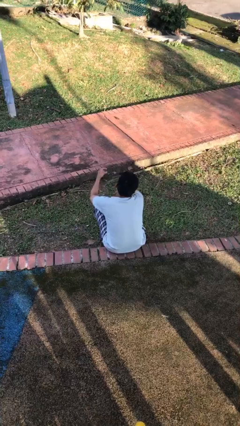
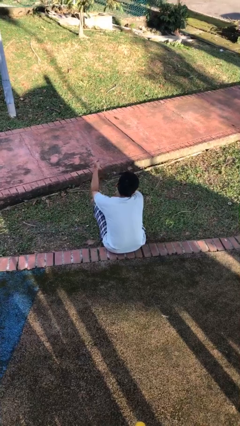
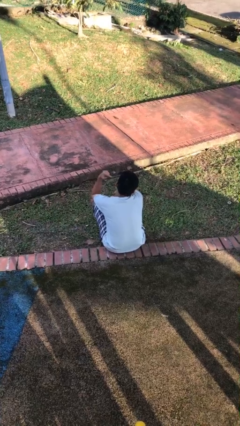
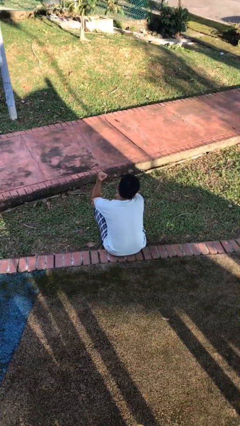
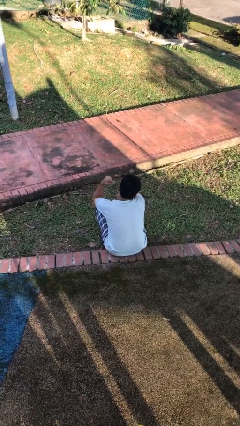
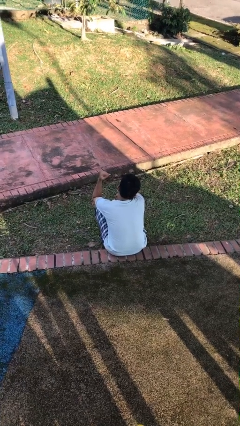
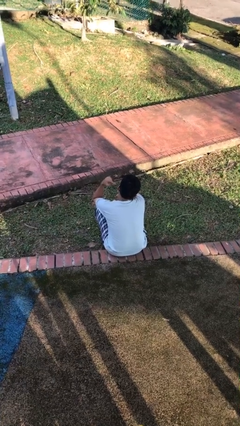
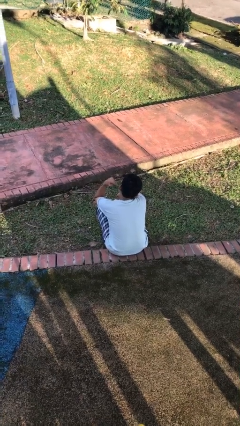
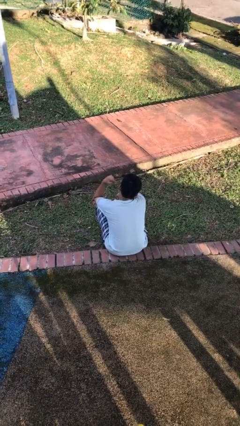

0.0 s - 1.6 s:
person gestures listen closely

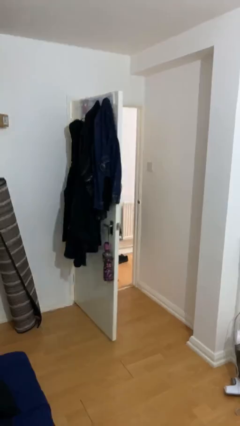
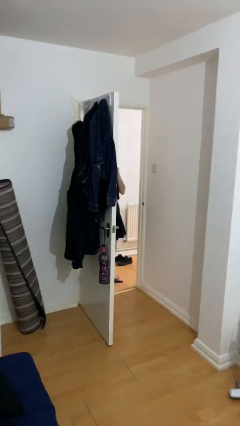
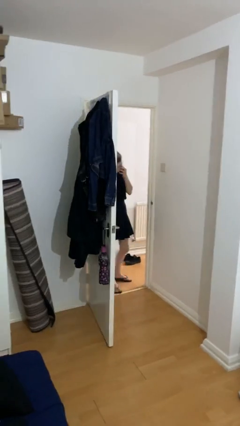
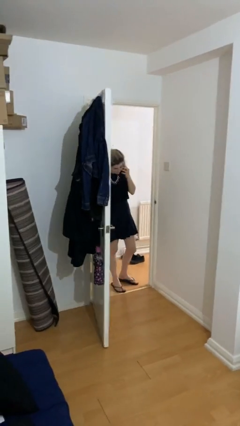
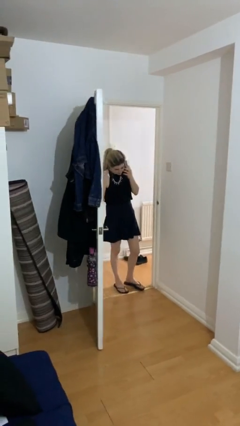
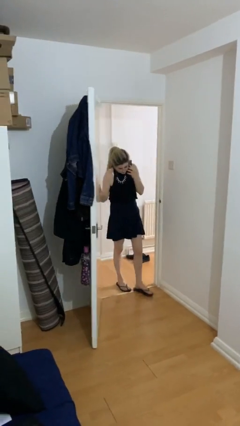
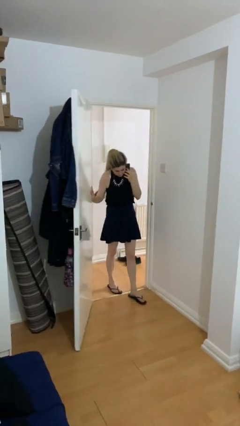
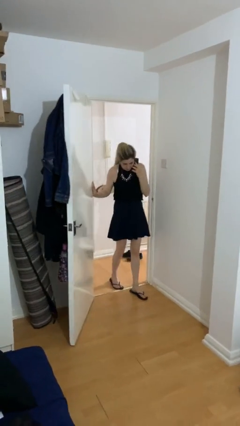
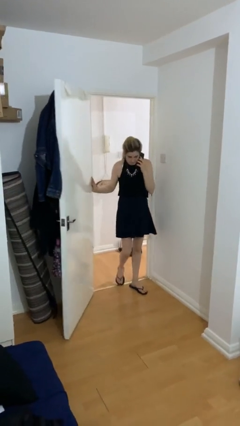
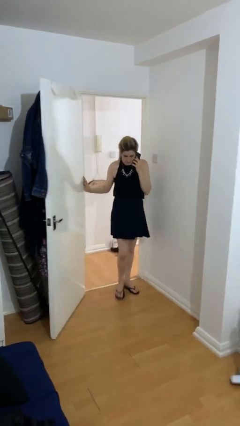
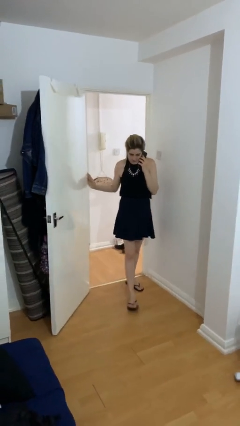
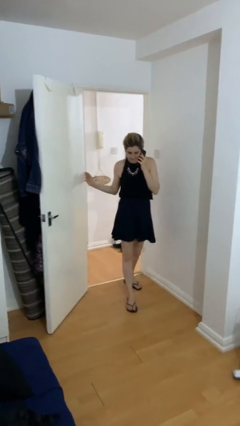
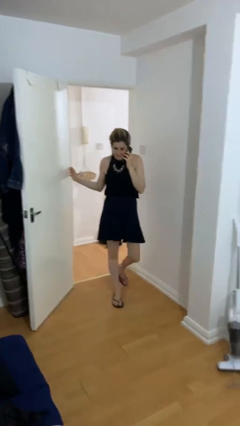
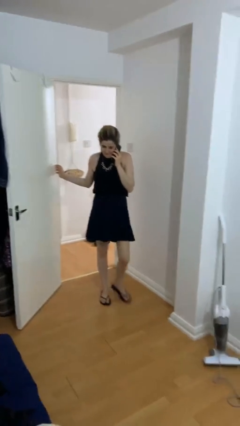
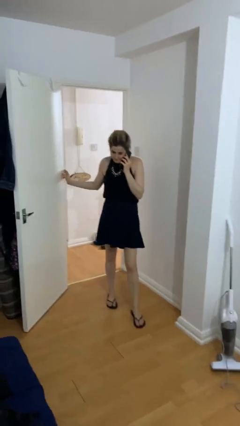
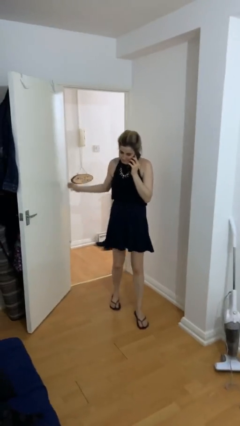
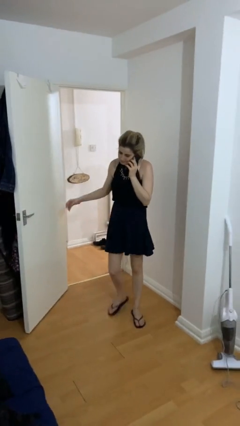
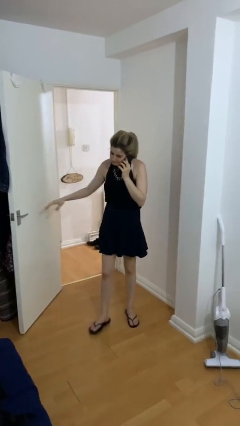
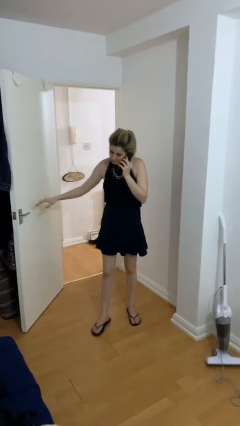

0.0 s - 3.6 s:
person enters scene through structure

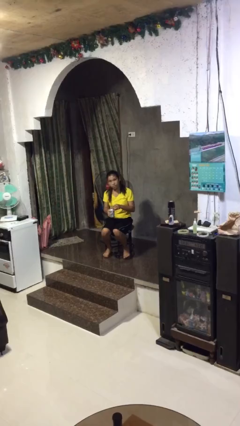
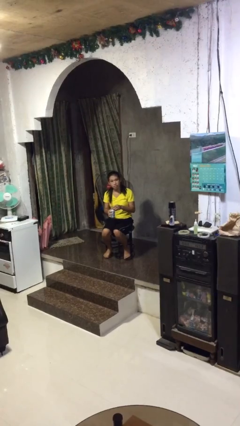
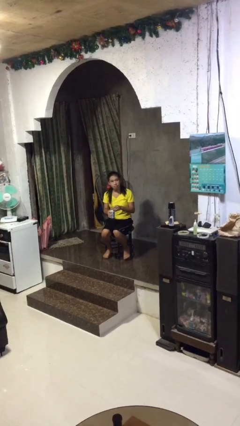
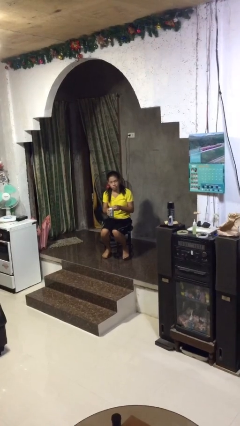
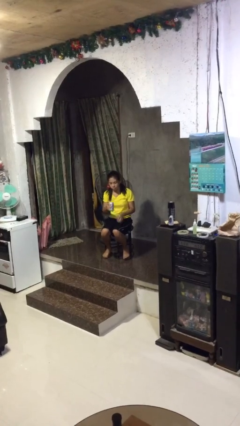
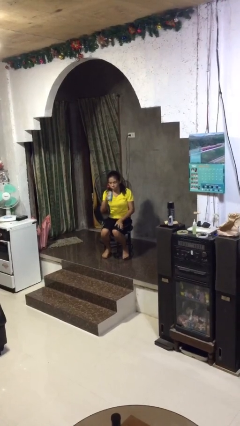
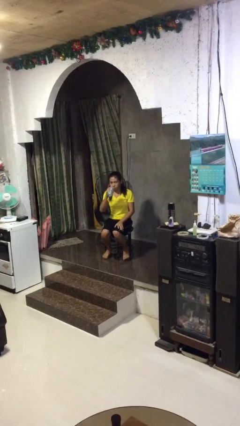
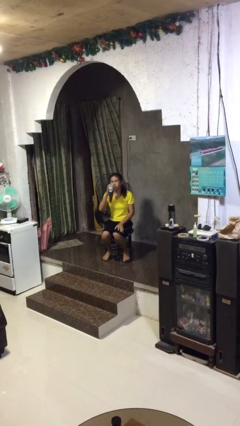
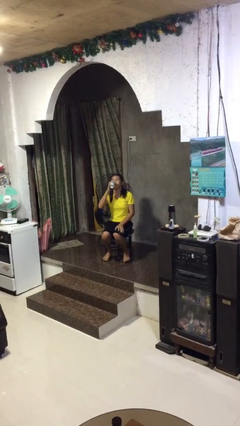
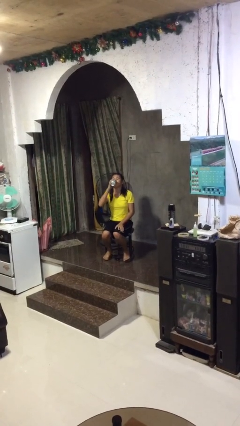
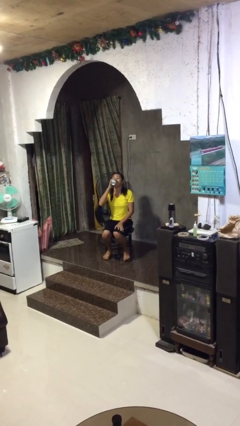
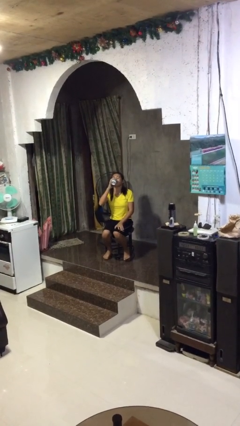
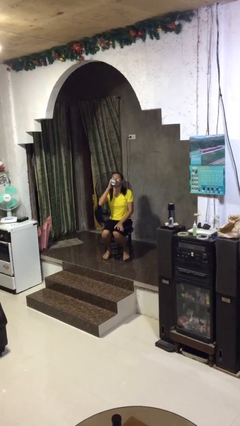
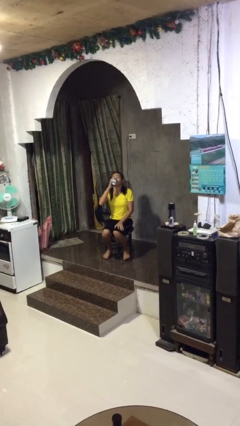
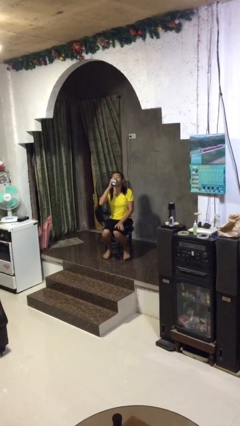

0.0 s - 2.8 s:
person drinks from beverage can

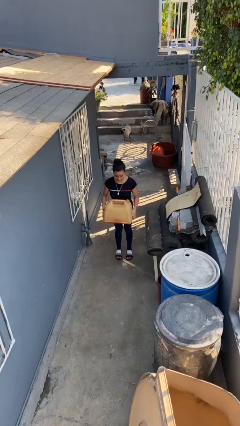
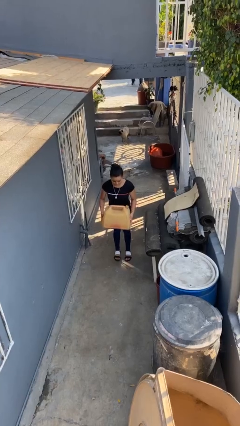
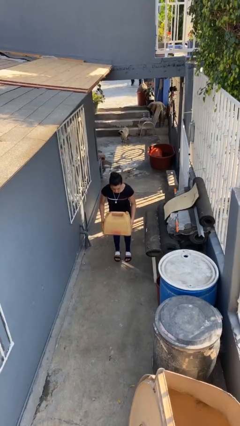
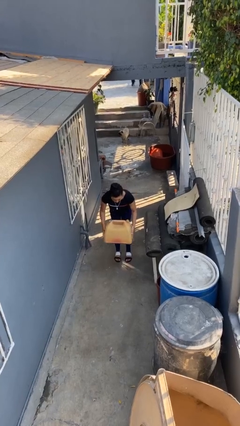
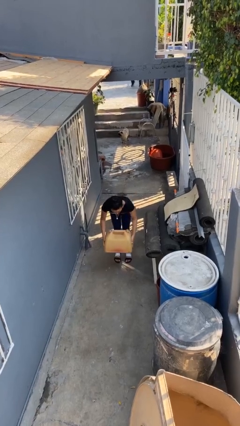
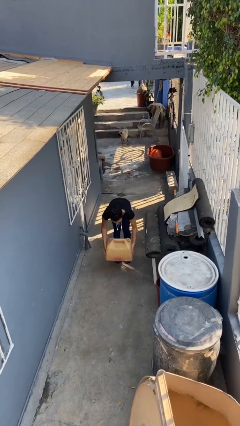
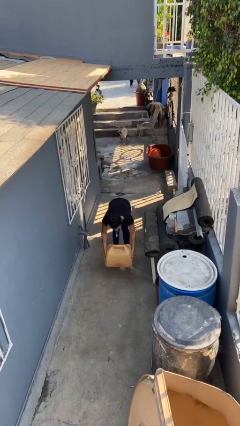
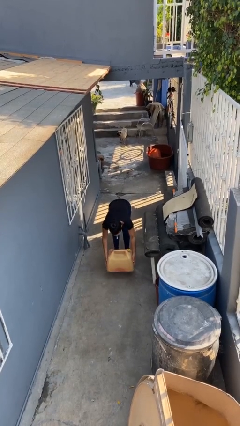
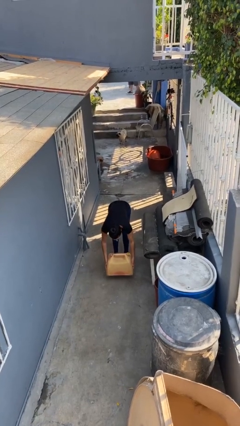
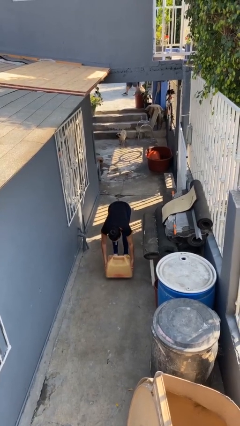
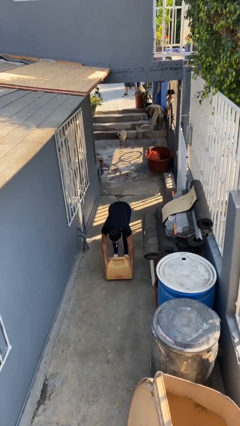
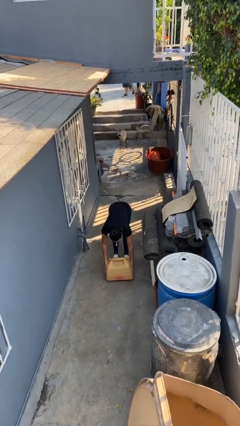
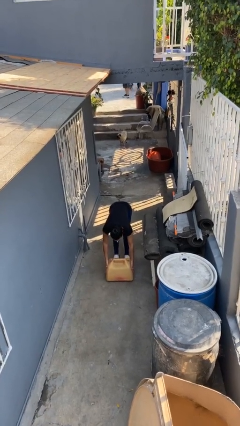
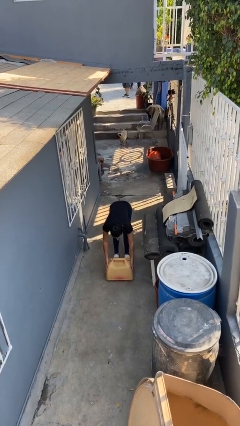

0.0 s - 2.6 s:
person puts down object on floor

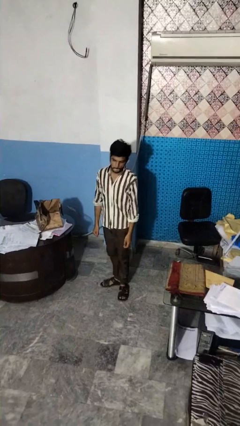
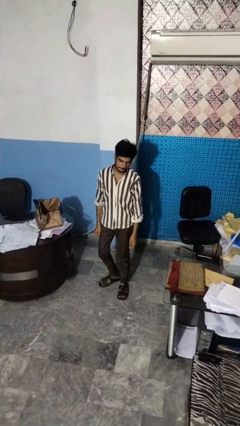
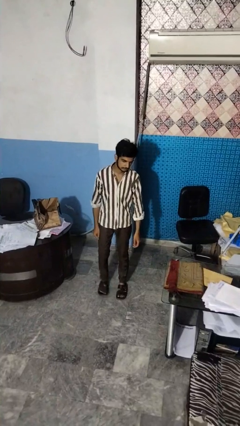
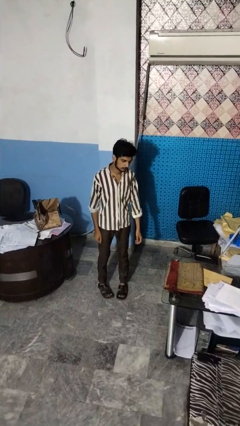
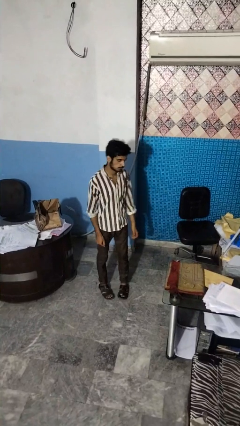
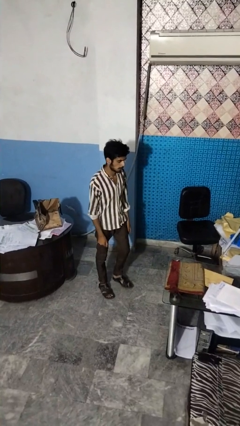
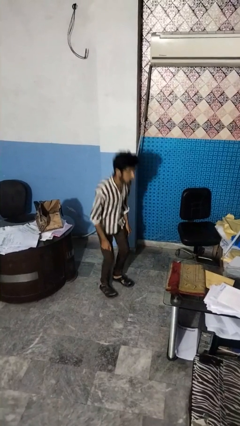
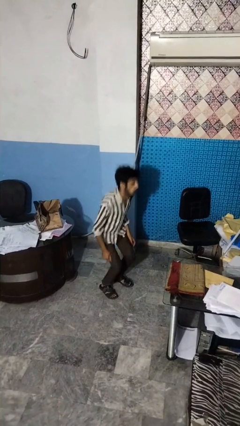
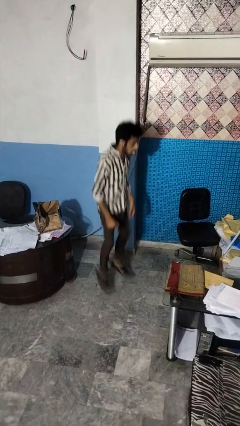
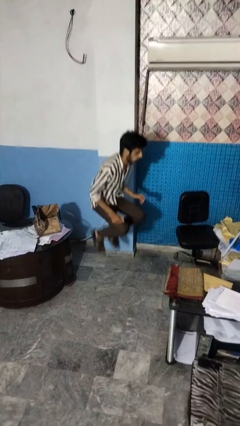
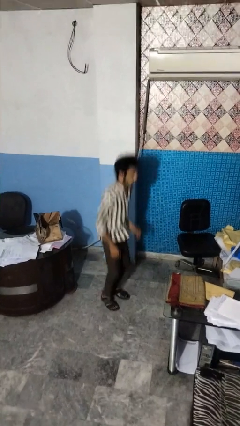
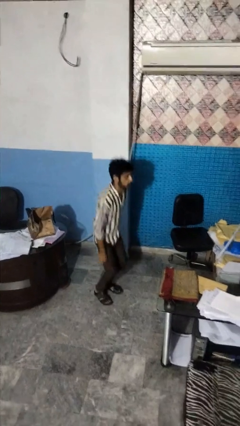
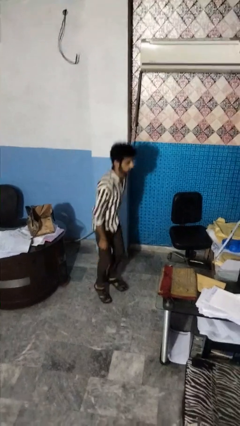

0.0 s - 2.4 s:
person jumps

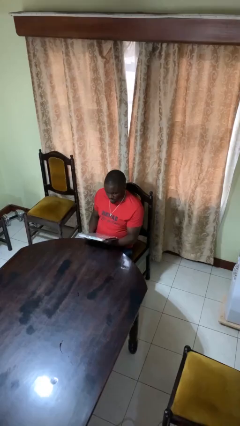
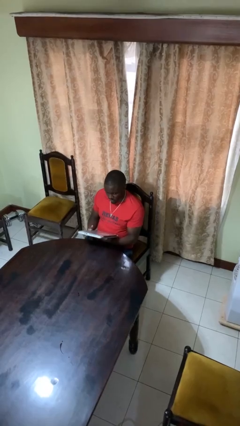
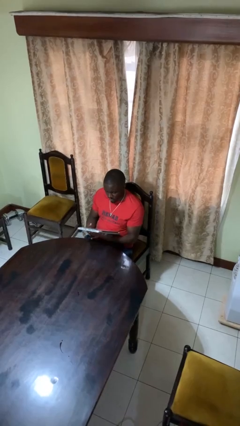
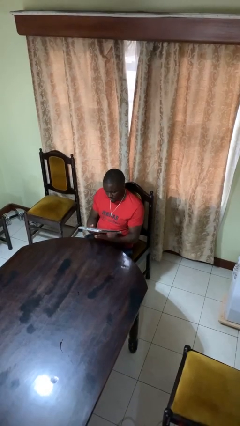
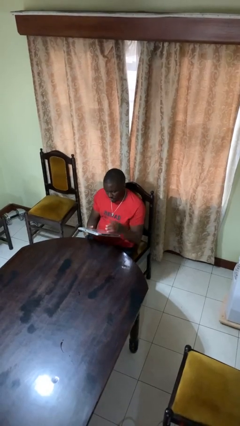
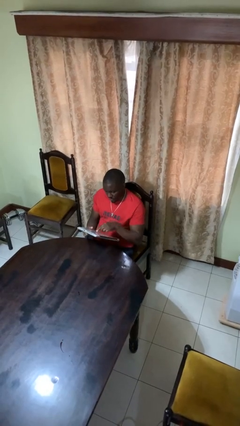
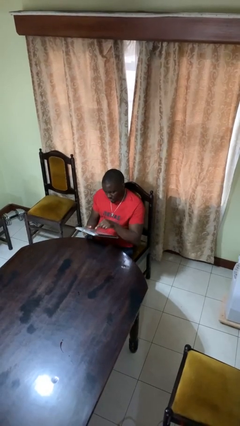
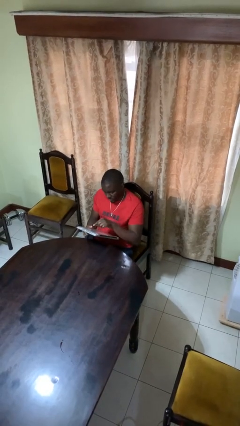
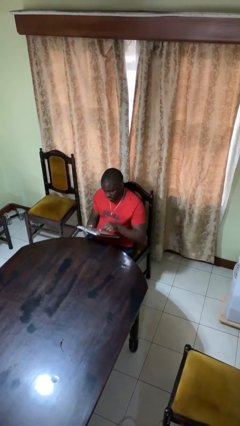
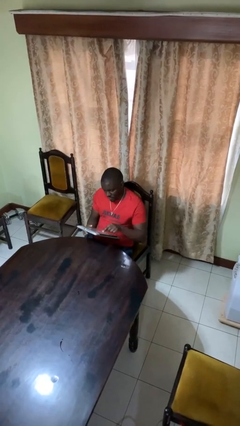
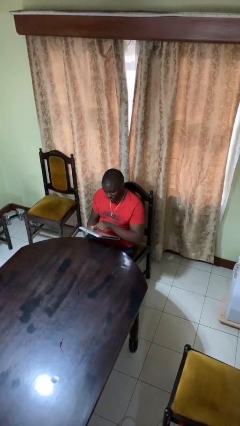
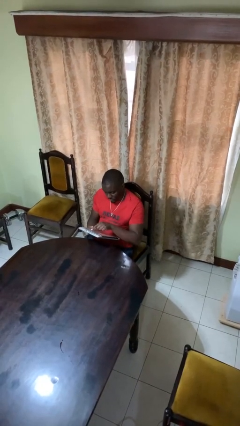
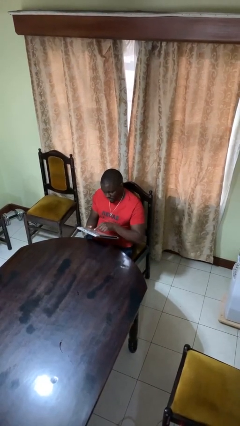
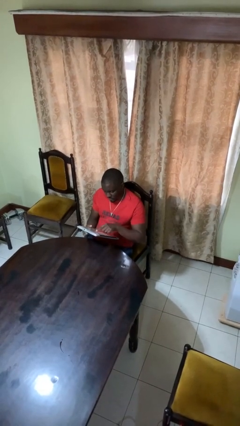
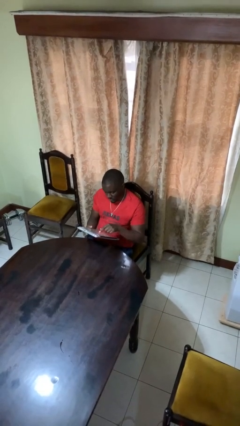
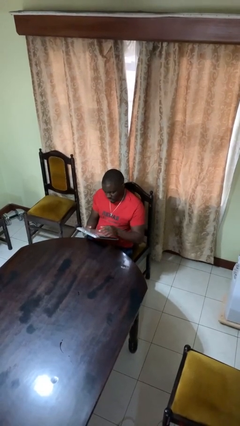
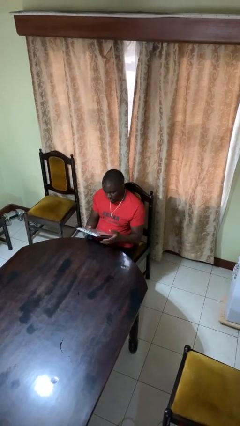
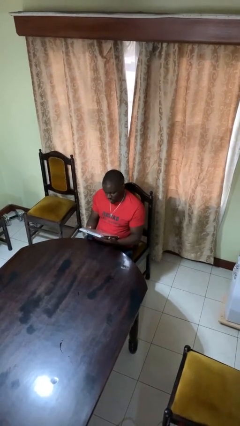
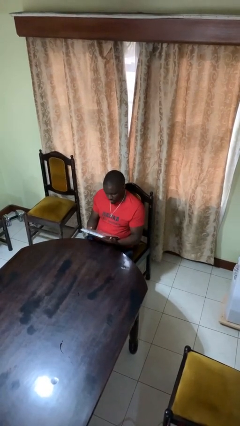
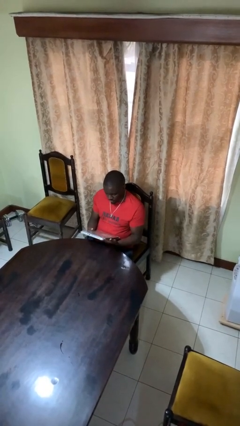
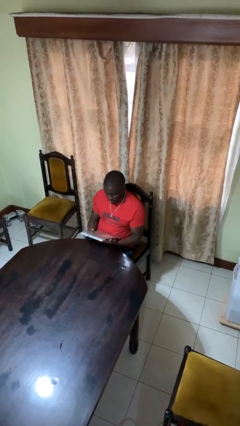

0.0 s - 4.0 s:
person interacts with tablet

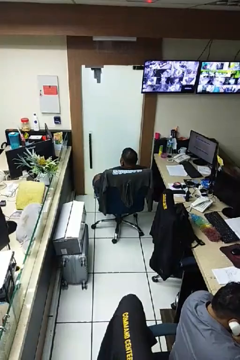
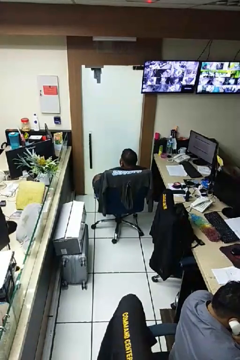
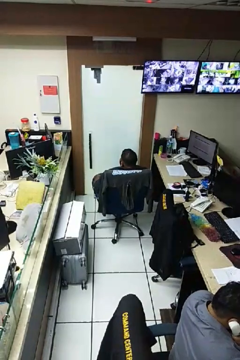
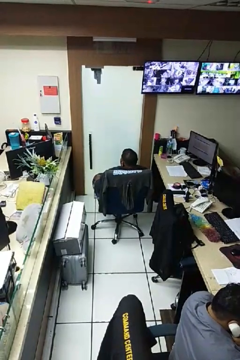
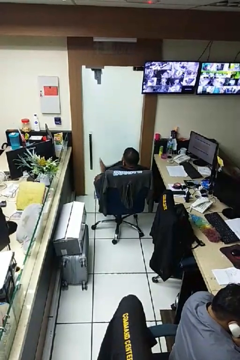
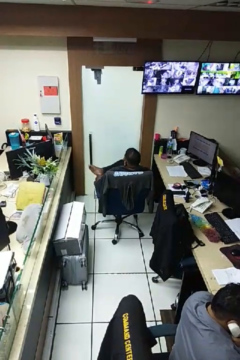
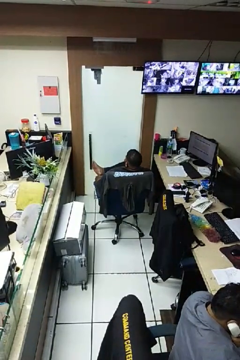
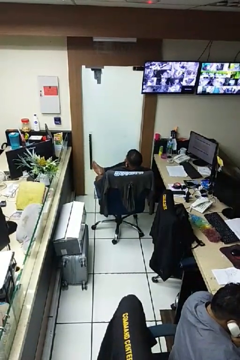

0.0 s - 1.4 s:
person crosses legs
